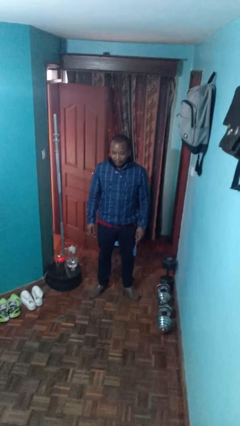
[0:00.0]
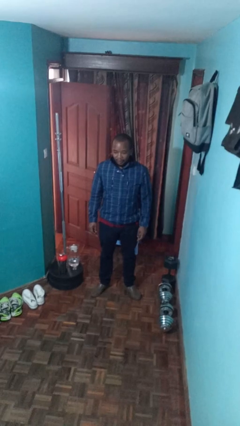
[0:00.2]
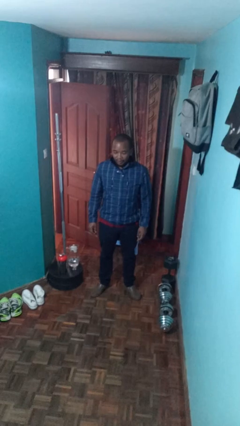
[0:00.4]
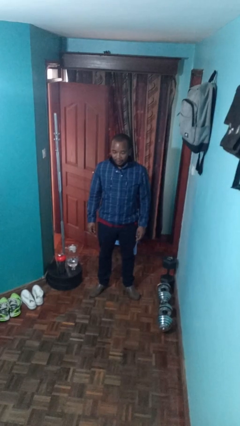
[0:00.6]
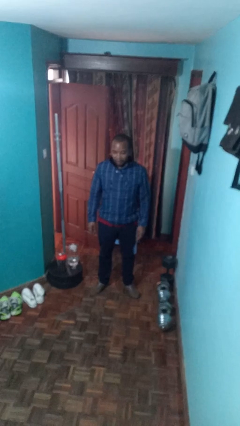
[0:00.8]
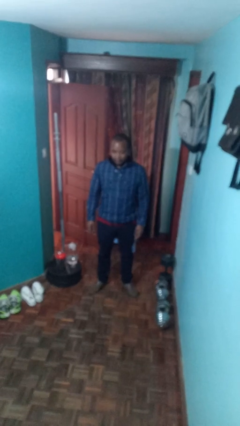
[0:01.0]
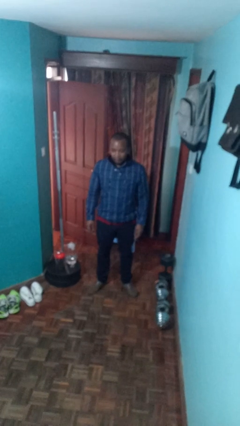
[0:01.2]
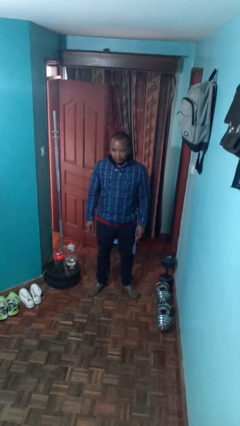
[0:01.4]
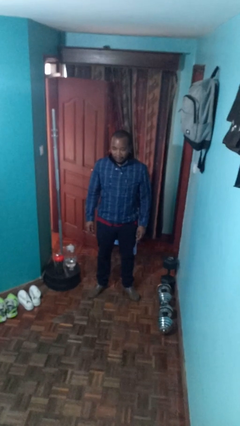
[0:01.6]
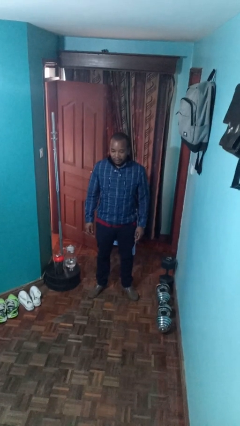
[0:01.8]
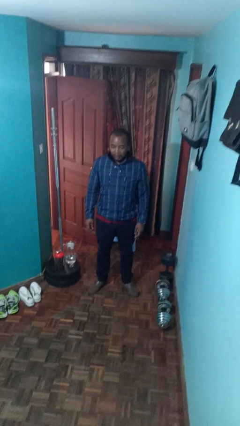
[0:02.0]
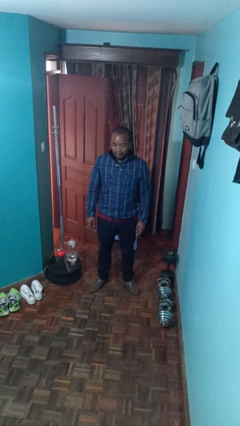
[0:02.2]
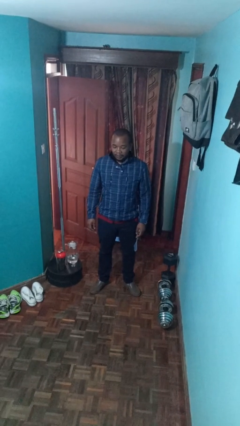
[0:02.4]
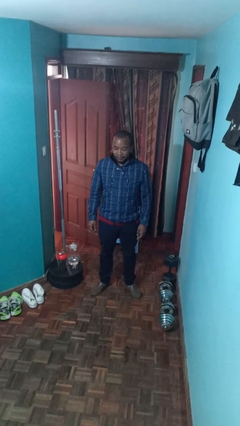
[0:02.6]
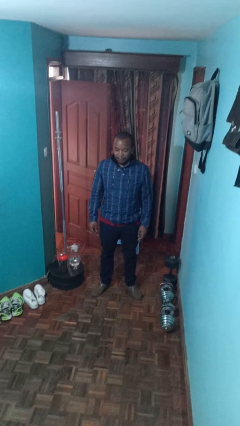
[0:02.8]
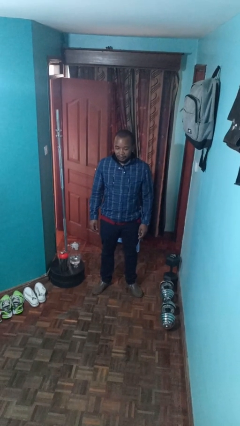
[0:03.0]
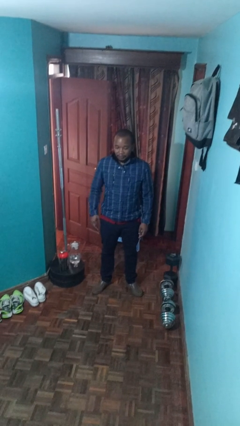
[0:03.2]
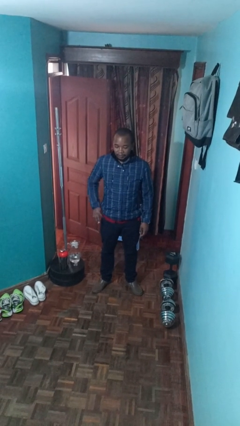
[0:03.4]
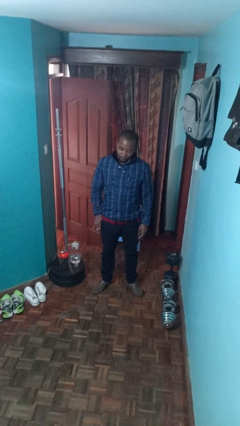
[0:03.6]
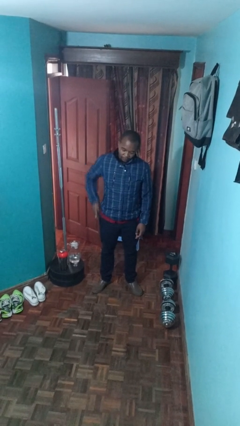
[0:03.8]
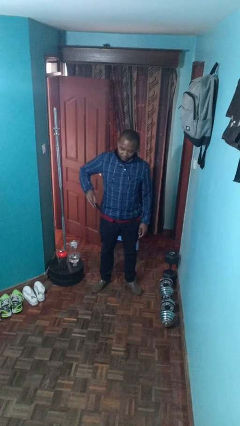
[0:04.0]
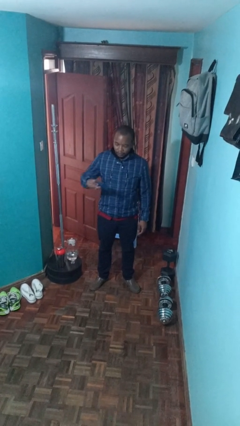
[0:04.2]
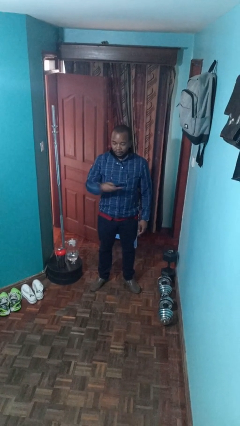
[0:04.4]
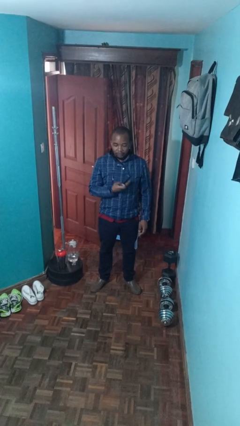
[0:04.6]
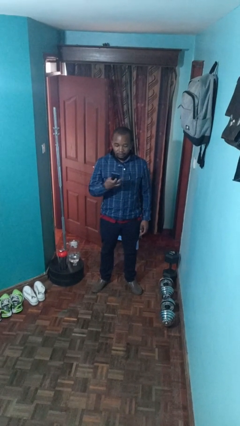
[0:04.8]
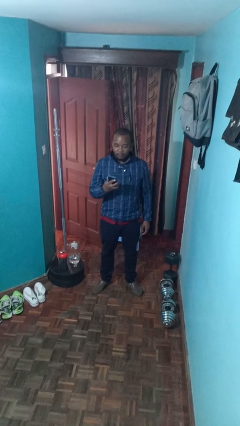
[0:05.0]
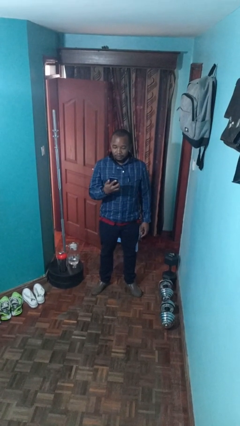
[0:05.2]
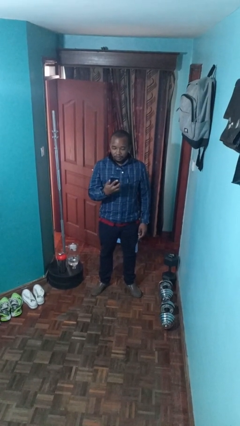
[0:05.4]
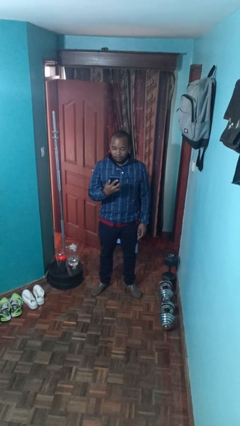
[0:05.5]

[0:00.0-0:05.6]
person takes phone from pocket

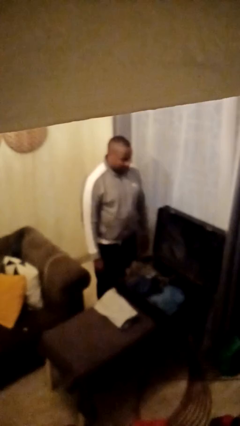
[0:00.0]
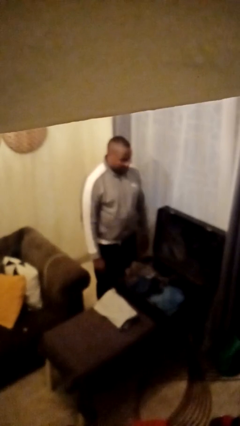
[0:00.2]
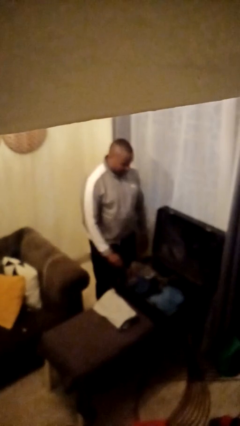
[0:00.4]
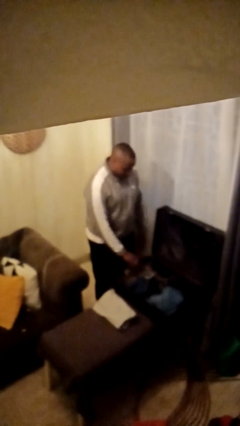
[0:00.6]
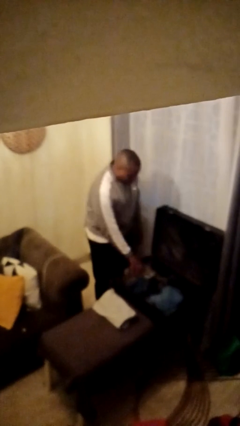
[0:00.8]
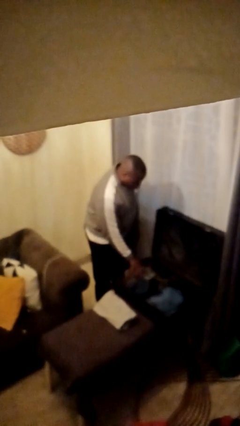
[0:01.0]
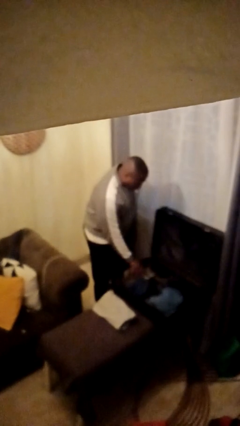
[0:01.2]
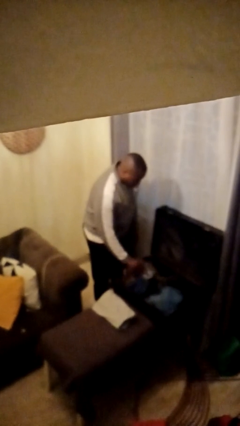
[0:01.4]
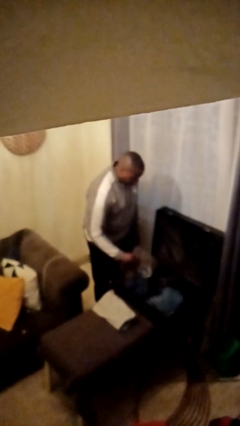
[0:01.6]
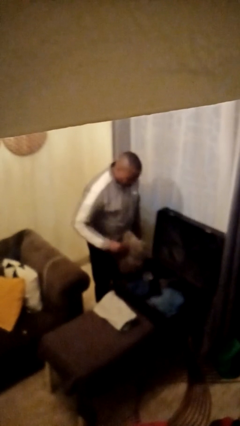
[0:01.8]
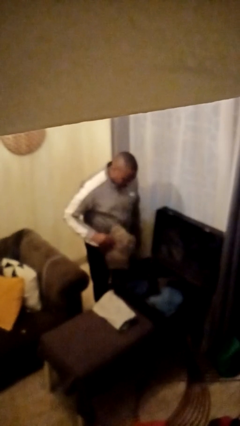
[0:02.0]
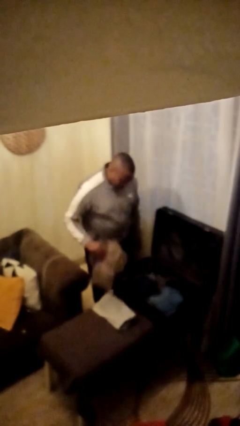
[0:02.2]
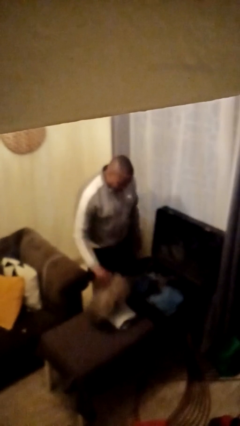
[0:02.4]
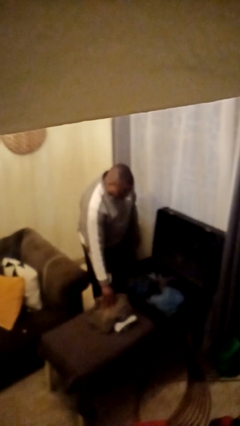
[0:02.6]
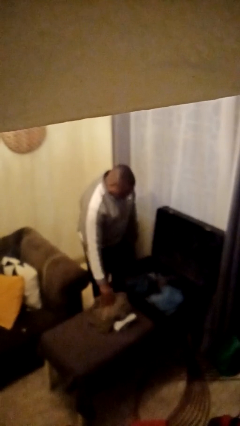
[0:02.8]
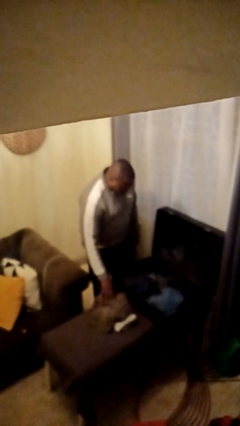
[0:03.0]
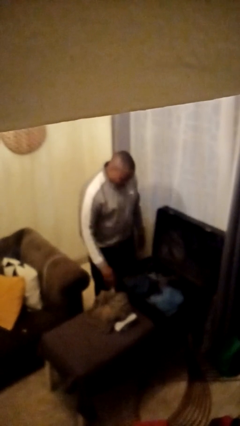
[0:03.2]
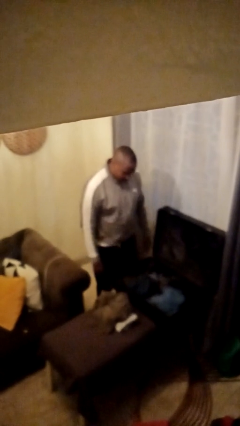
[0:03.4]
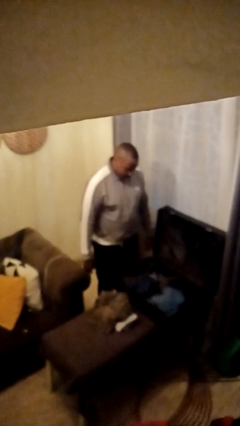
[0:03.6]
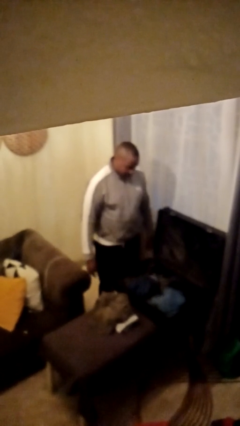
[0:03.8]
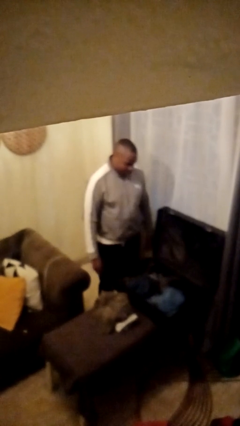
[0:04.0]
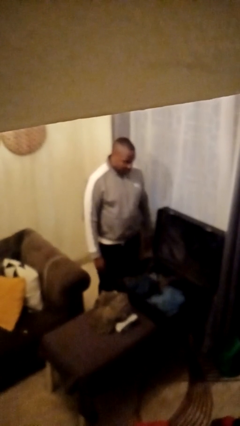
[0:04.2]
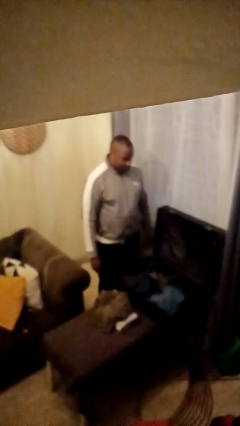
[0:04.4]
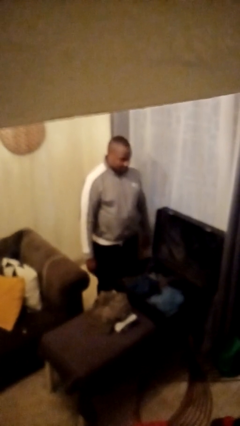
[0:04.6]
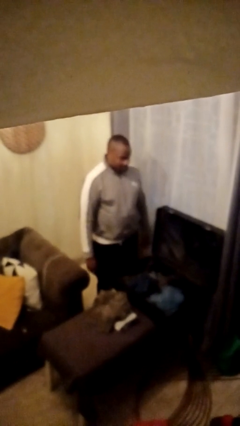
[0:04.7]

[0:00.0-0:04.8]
person unloads clothes from suitcase

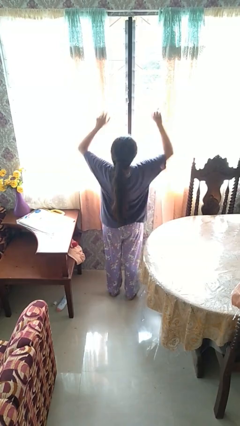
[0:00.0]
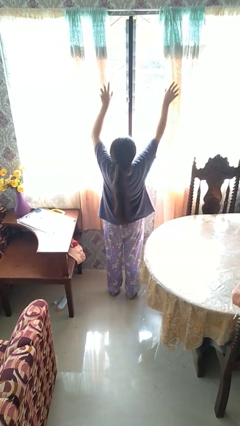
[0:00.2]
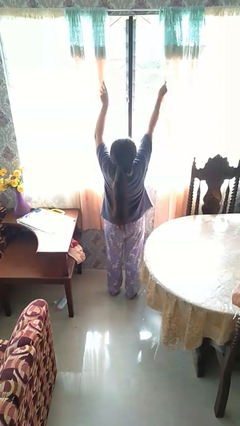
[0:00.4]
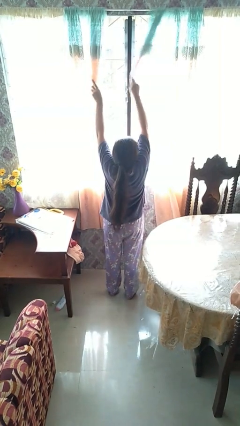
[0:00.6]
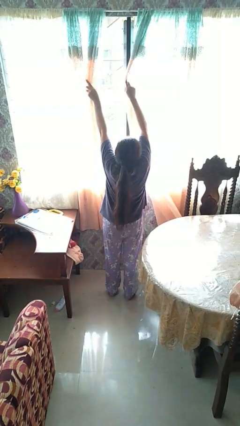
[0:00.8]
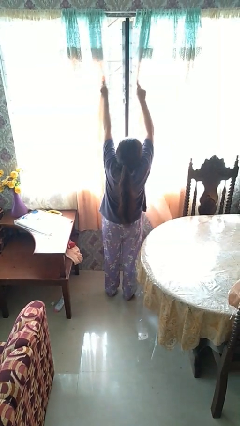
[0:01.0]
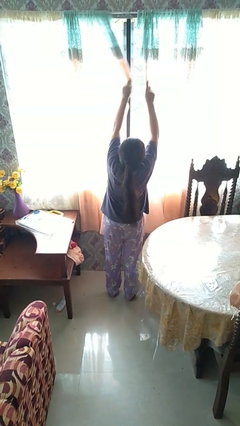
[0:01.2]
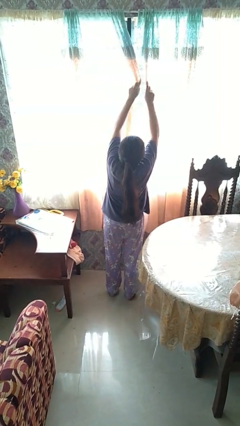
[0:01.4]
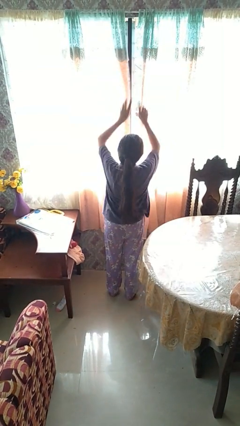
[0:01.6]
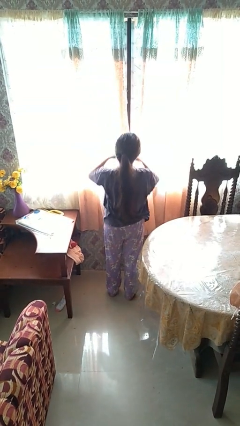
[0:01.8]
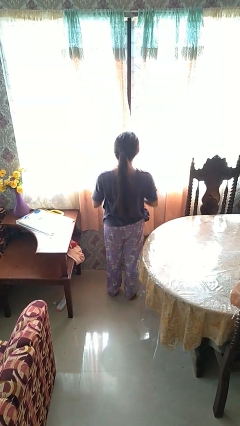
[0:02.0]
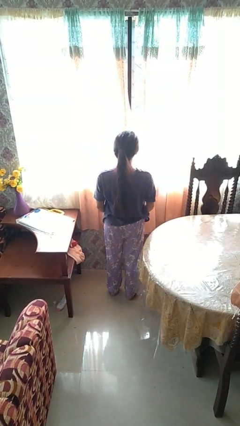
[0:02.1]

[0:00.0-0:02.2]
person closes curtains

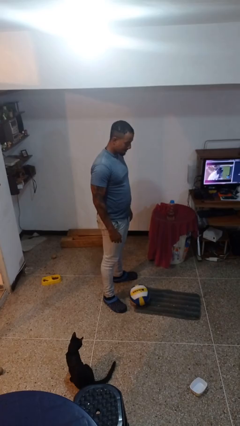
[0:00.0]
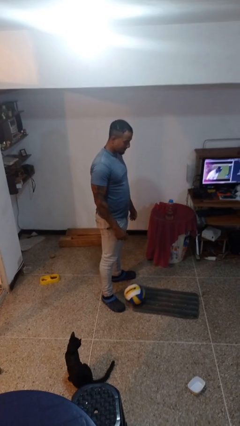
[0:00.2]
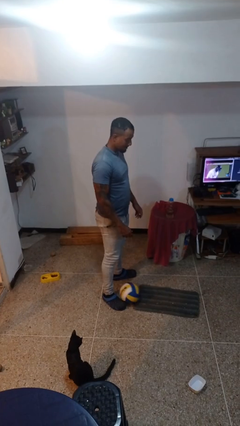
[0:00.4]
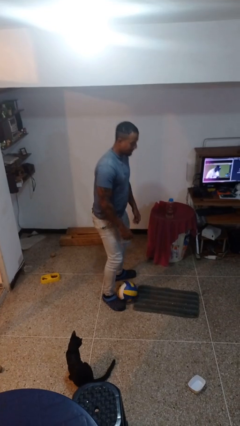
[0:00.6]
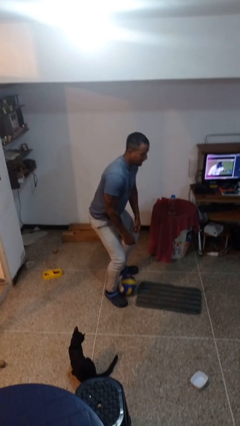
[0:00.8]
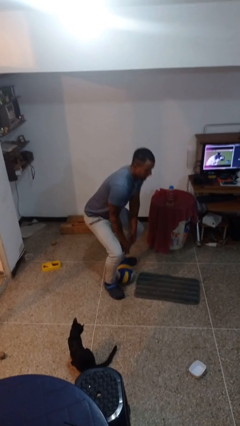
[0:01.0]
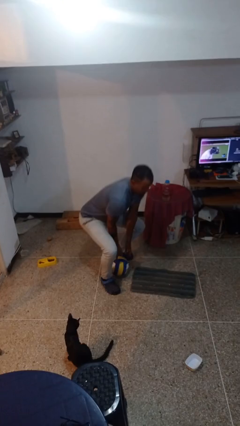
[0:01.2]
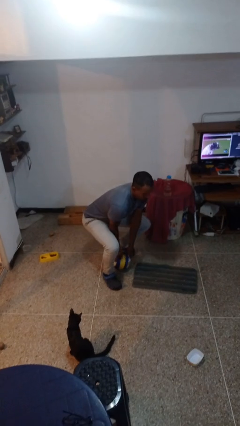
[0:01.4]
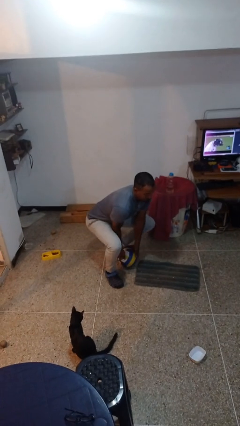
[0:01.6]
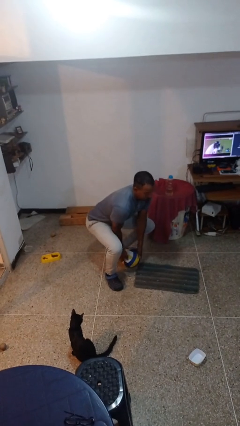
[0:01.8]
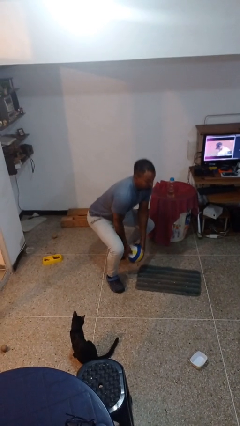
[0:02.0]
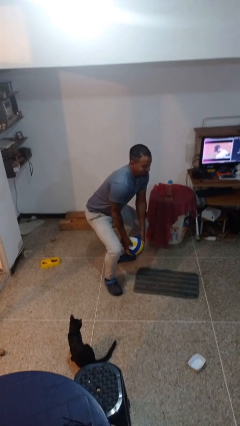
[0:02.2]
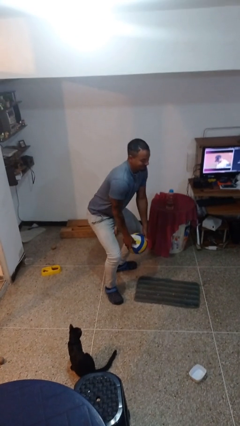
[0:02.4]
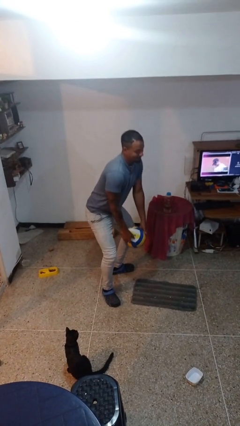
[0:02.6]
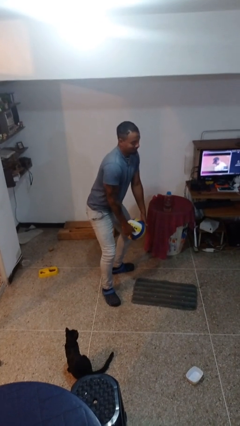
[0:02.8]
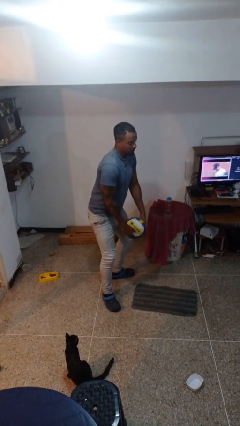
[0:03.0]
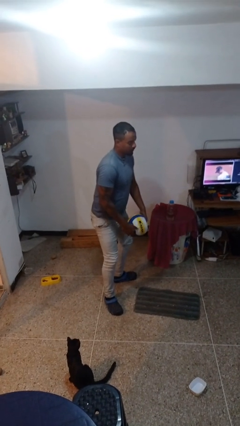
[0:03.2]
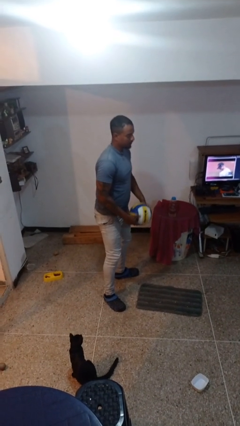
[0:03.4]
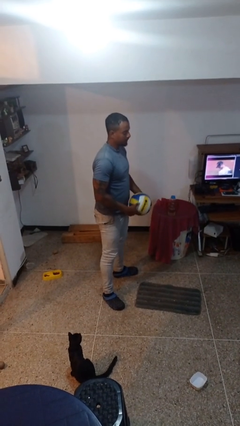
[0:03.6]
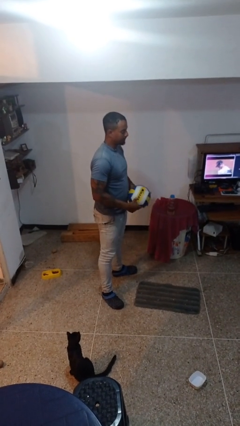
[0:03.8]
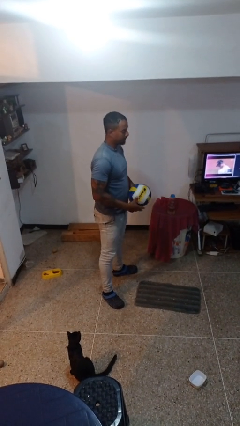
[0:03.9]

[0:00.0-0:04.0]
person picks up object from floor

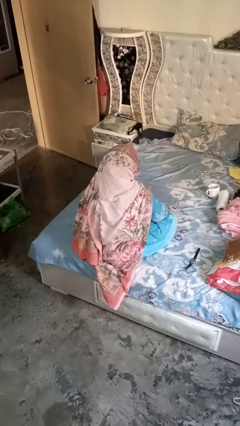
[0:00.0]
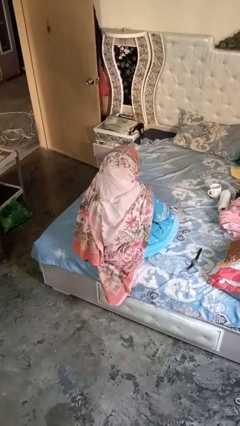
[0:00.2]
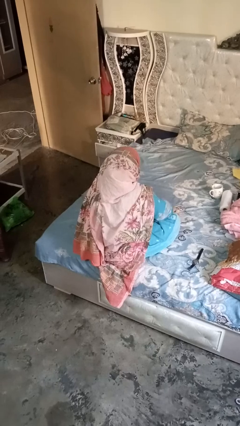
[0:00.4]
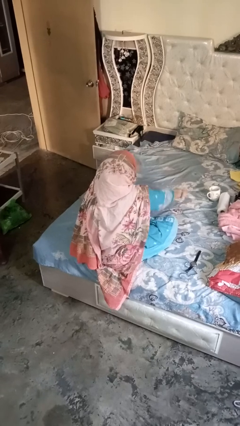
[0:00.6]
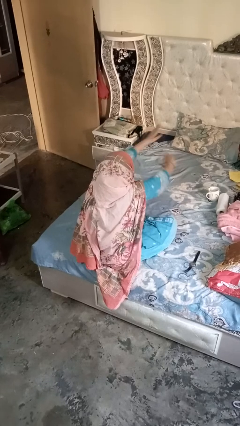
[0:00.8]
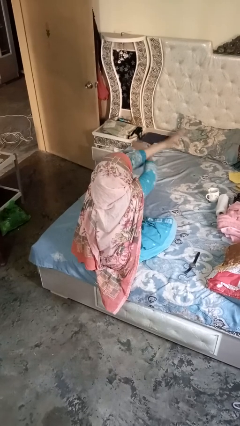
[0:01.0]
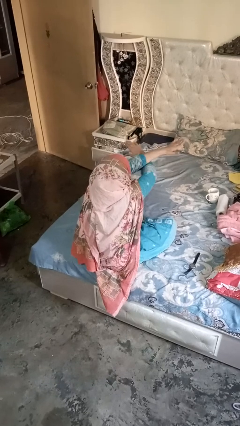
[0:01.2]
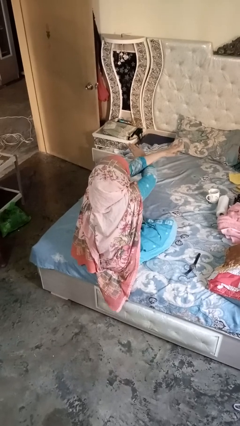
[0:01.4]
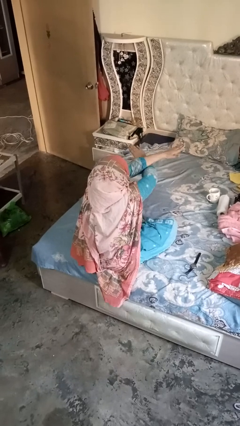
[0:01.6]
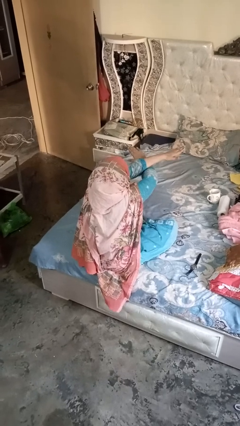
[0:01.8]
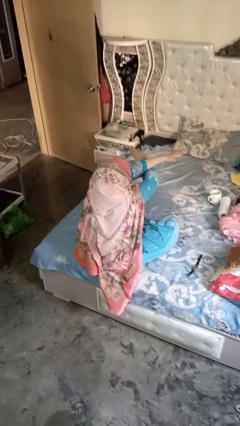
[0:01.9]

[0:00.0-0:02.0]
person gestures arms x
